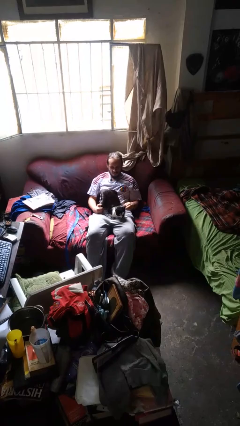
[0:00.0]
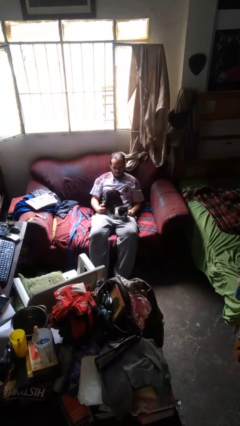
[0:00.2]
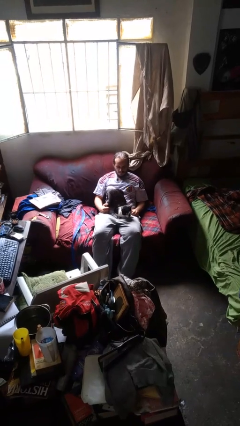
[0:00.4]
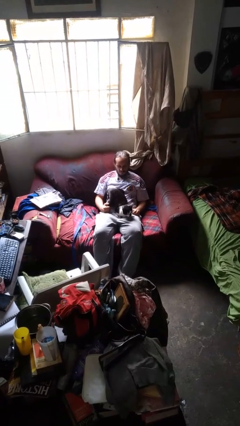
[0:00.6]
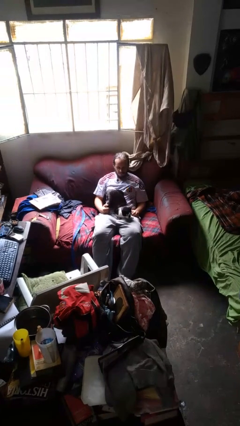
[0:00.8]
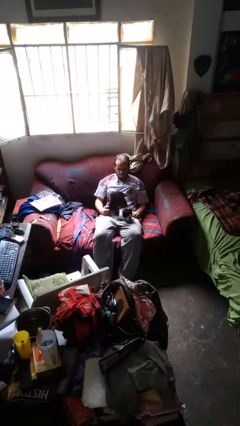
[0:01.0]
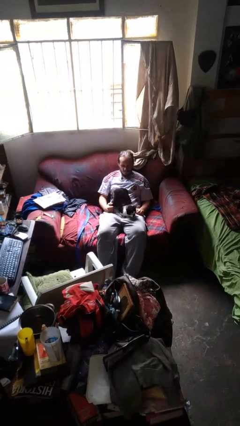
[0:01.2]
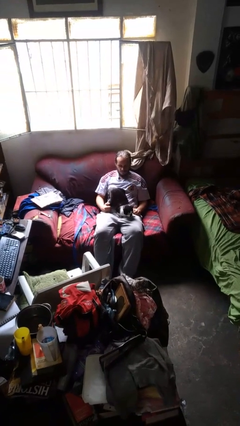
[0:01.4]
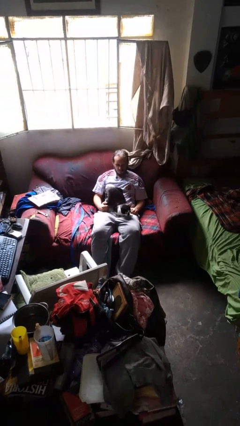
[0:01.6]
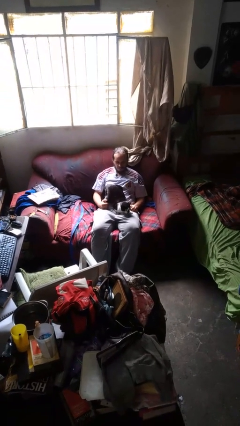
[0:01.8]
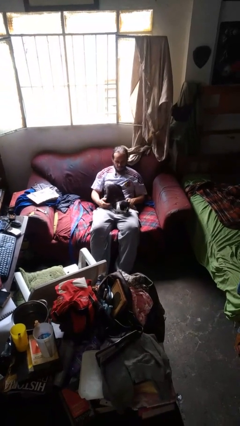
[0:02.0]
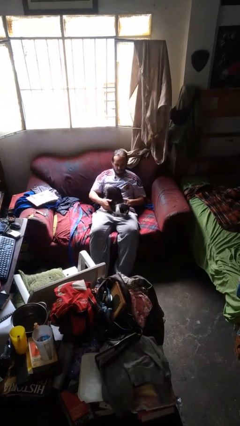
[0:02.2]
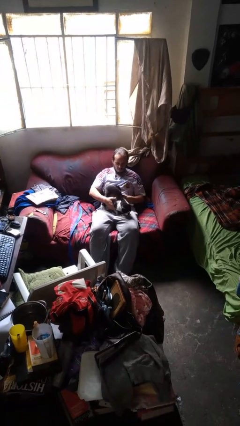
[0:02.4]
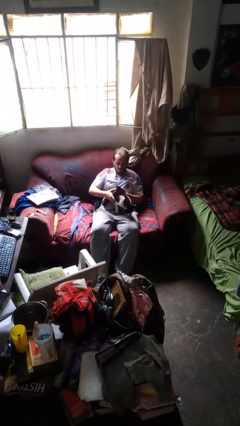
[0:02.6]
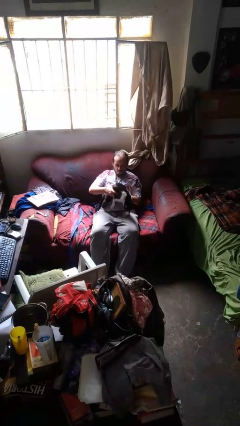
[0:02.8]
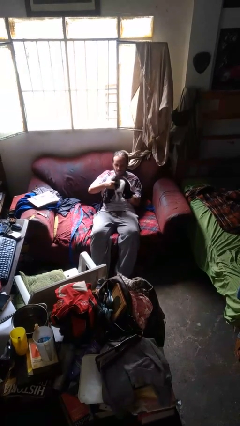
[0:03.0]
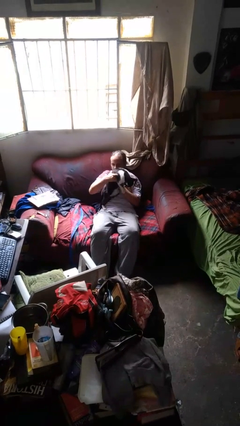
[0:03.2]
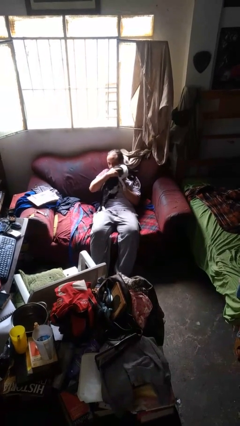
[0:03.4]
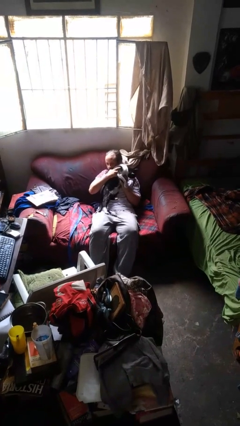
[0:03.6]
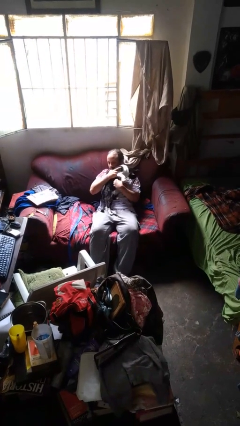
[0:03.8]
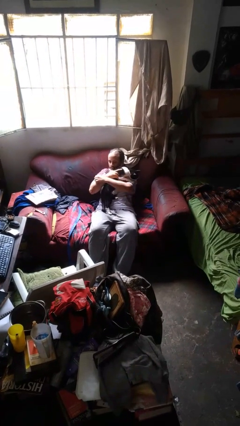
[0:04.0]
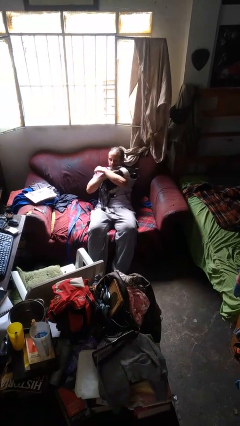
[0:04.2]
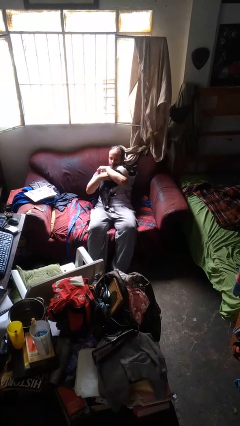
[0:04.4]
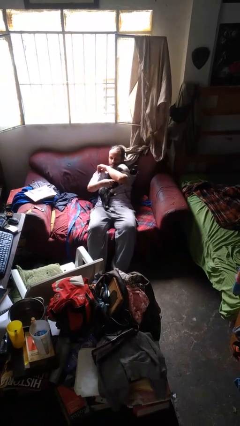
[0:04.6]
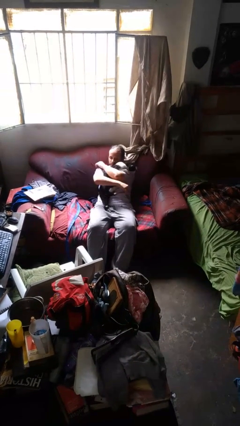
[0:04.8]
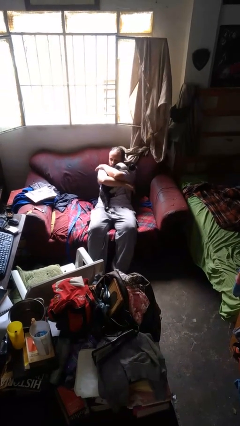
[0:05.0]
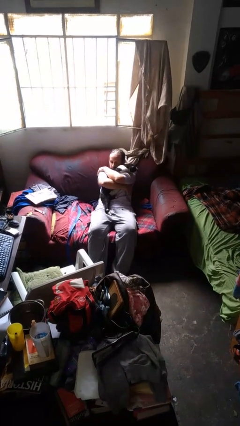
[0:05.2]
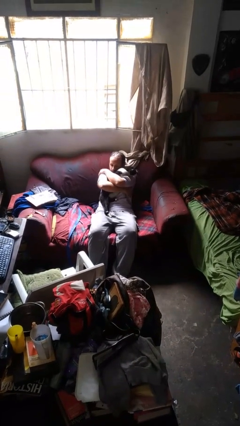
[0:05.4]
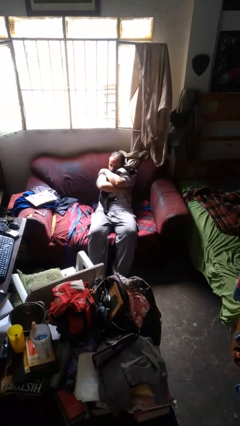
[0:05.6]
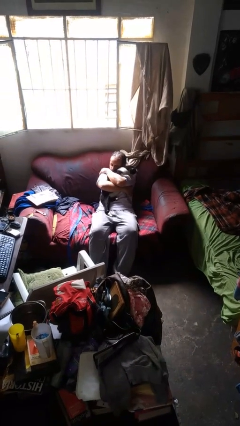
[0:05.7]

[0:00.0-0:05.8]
person hugs dog

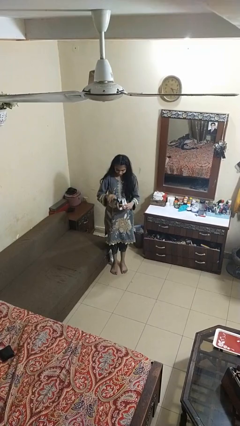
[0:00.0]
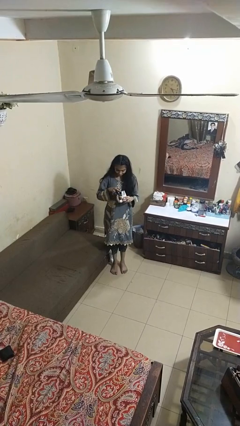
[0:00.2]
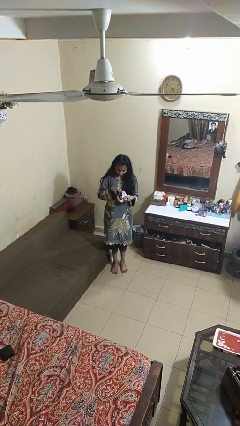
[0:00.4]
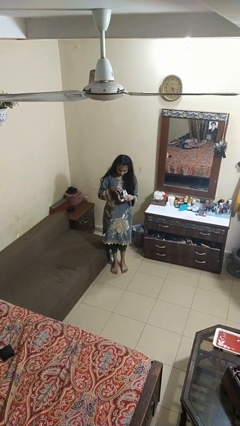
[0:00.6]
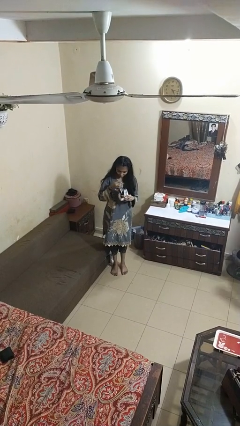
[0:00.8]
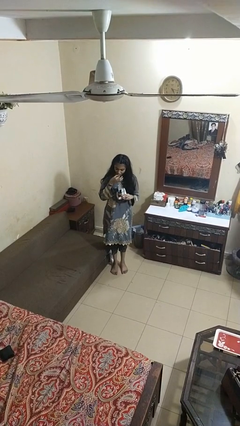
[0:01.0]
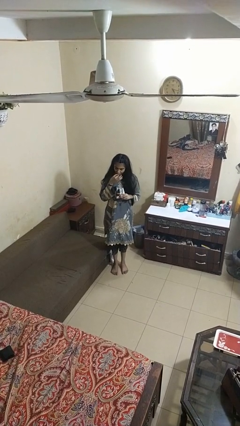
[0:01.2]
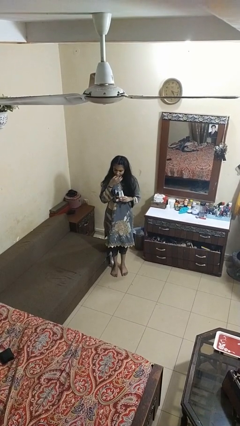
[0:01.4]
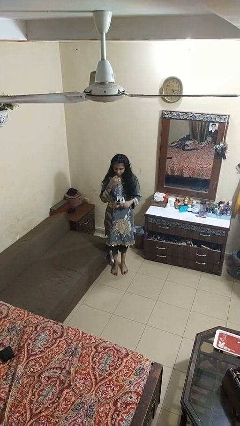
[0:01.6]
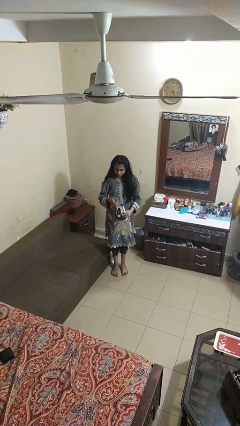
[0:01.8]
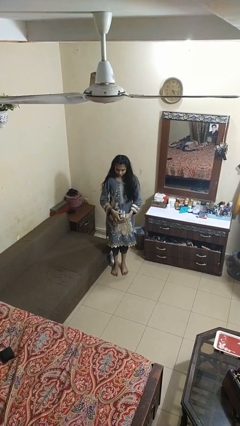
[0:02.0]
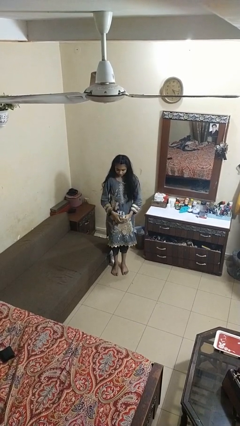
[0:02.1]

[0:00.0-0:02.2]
person eats snack from bag

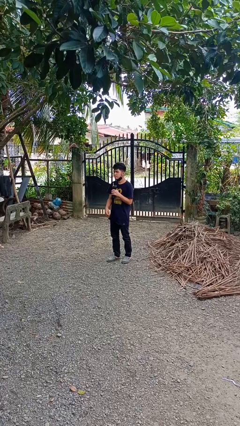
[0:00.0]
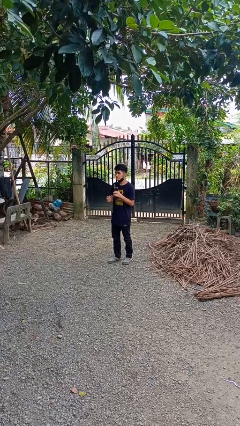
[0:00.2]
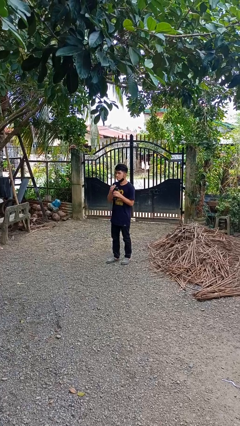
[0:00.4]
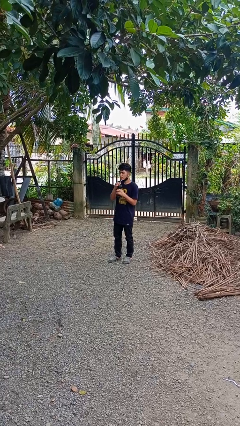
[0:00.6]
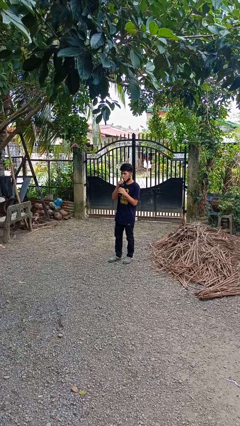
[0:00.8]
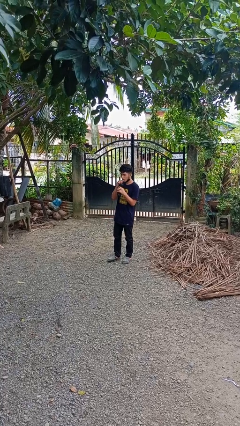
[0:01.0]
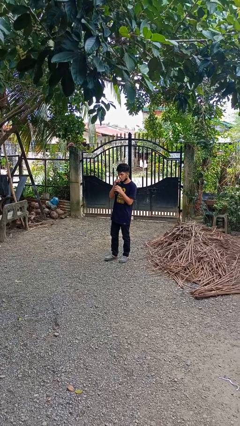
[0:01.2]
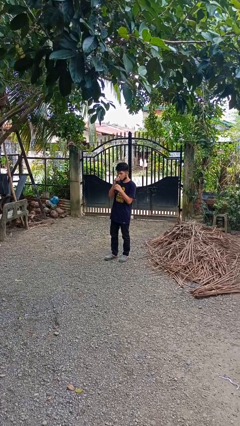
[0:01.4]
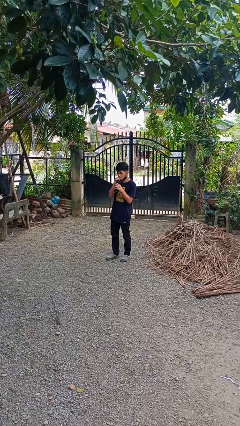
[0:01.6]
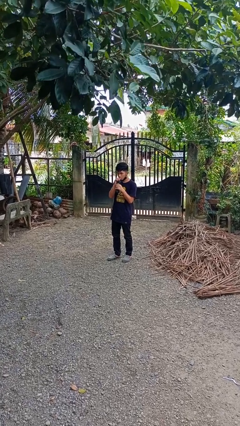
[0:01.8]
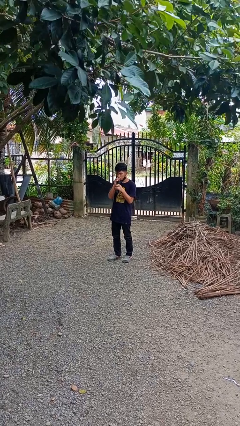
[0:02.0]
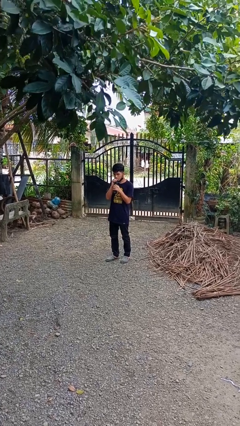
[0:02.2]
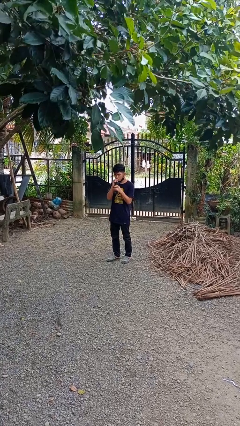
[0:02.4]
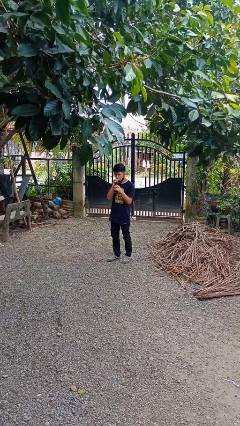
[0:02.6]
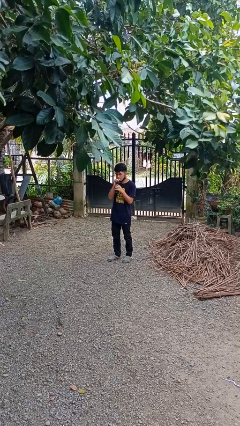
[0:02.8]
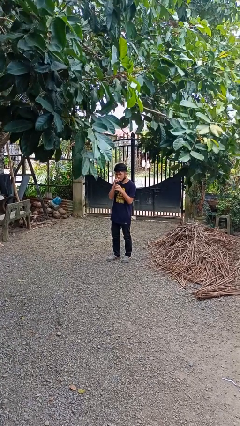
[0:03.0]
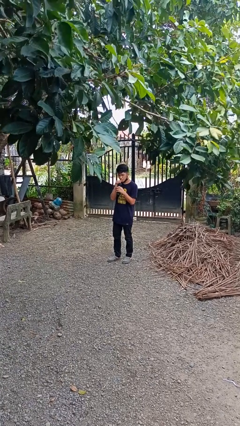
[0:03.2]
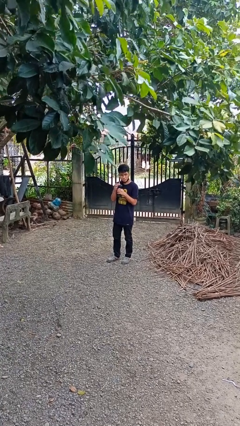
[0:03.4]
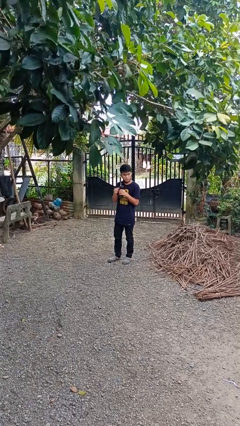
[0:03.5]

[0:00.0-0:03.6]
person drinks from straw

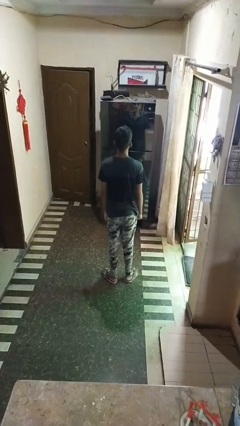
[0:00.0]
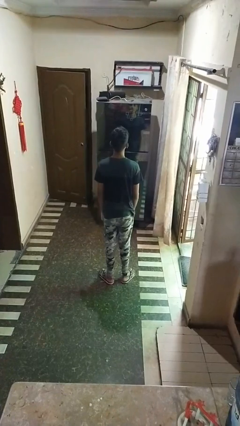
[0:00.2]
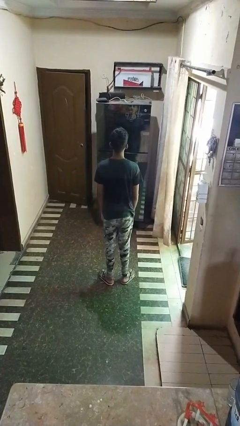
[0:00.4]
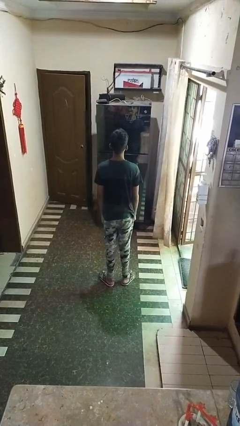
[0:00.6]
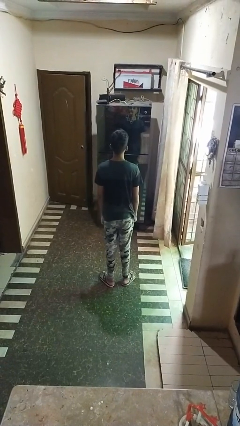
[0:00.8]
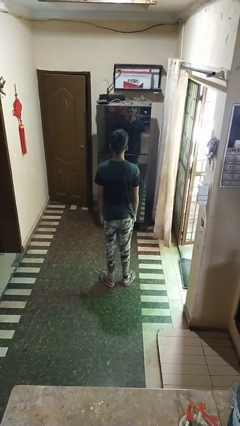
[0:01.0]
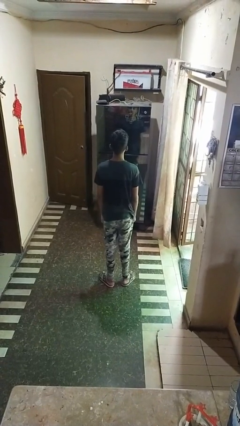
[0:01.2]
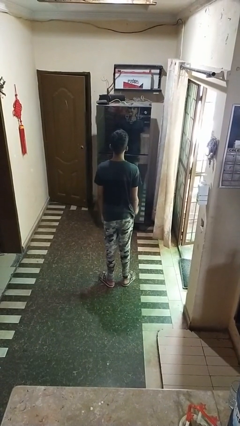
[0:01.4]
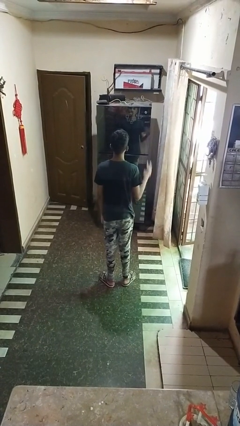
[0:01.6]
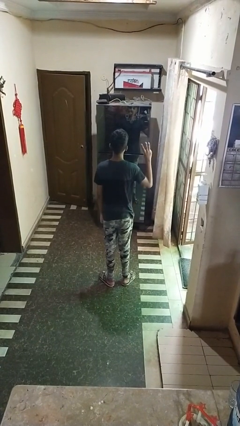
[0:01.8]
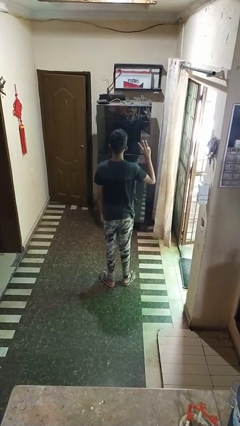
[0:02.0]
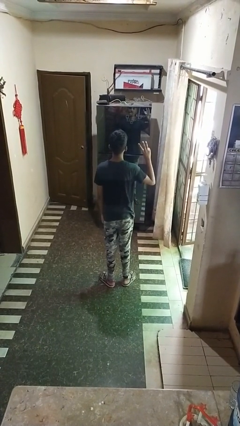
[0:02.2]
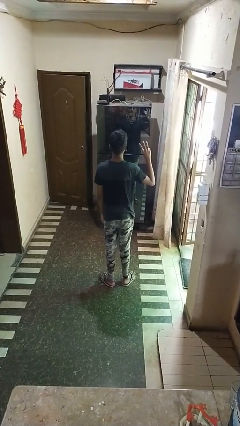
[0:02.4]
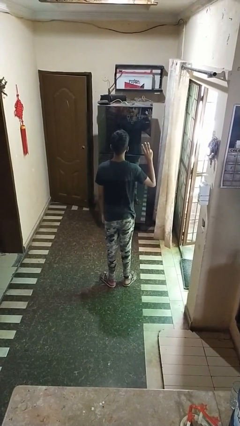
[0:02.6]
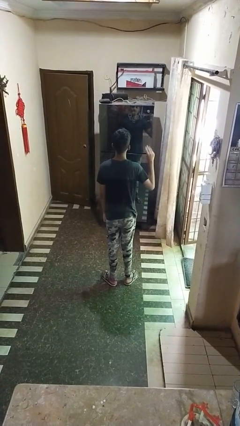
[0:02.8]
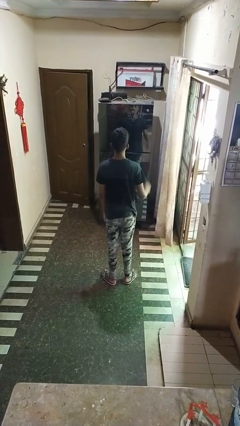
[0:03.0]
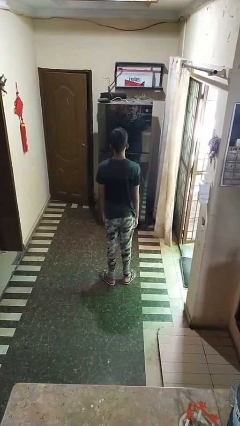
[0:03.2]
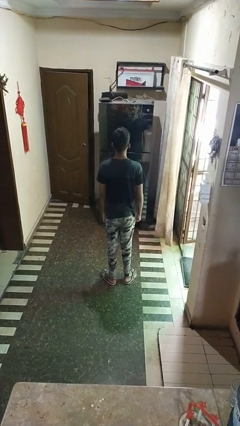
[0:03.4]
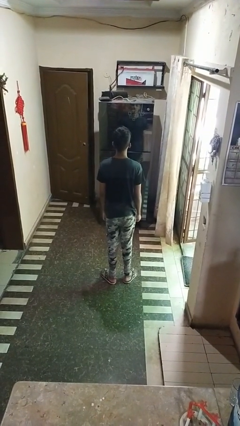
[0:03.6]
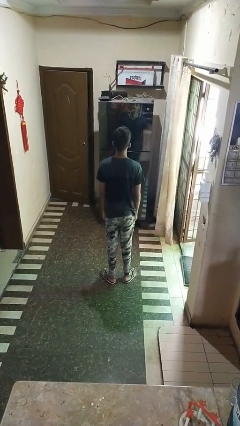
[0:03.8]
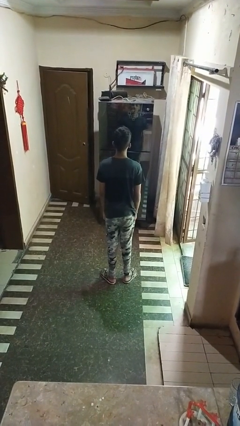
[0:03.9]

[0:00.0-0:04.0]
person gestures number three

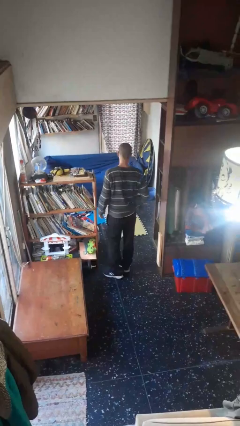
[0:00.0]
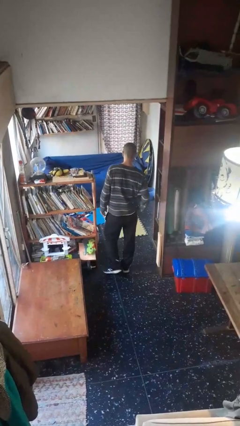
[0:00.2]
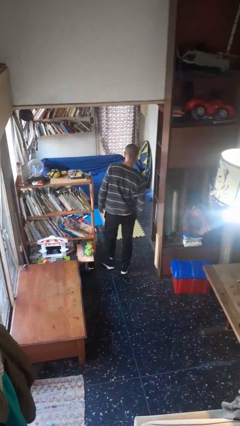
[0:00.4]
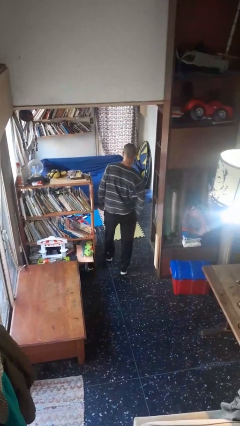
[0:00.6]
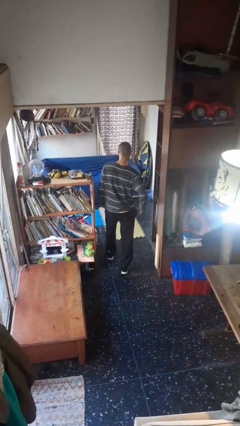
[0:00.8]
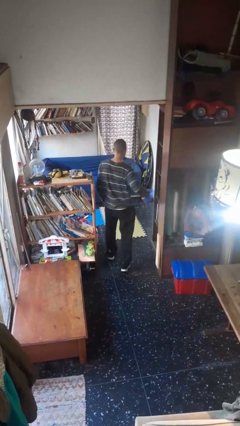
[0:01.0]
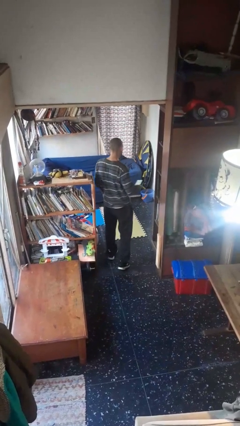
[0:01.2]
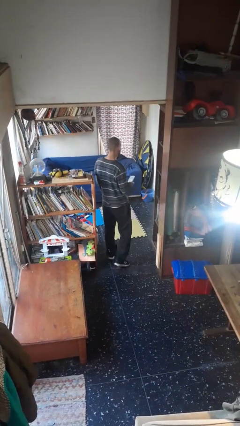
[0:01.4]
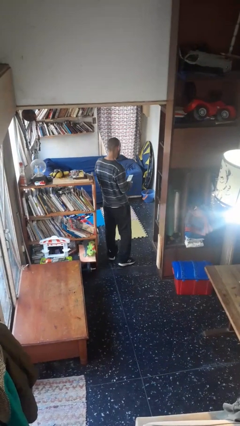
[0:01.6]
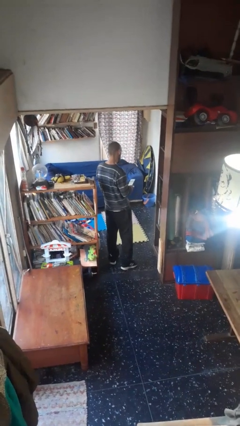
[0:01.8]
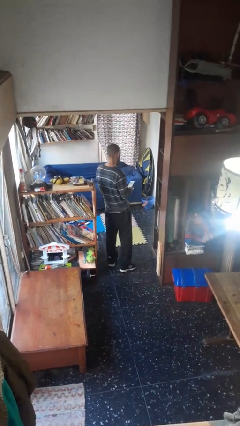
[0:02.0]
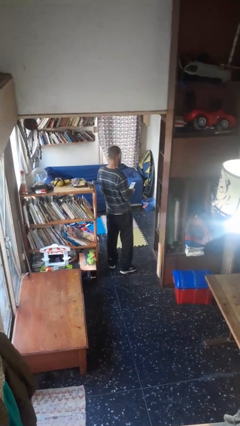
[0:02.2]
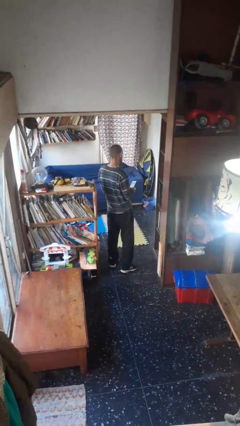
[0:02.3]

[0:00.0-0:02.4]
person takes phone from pocket
